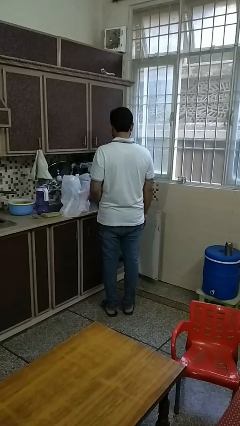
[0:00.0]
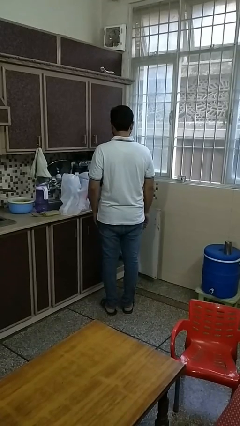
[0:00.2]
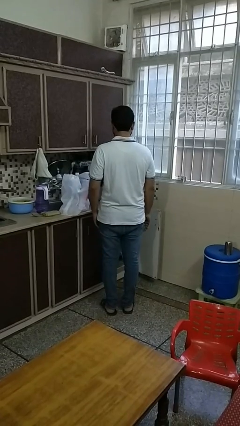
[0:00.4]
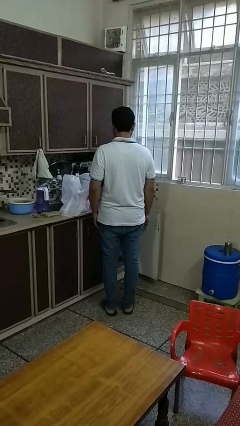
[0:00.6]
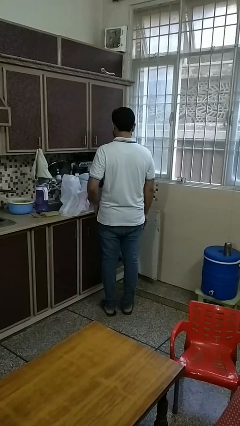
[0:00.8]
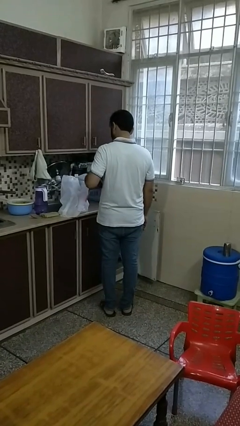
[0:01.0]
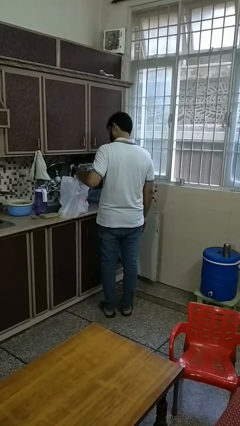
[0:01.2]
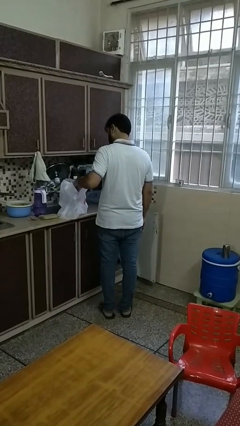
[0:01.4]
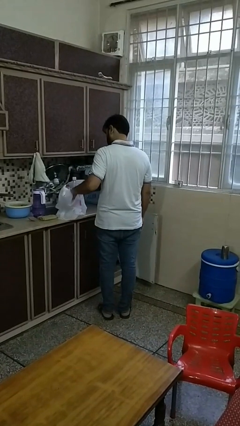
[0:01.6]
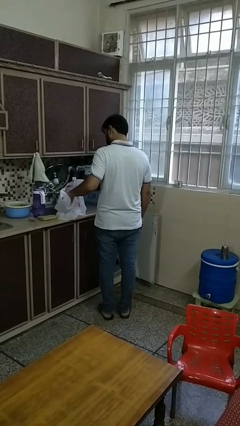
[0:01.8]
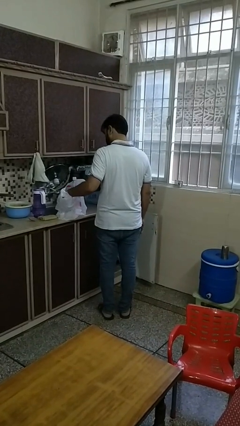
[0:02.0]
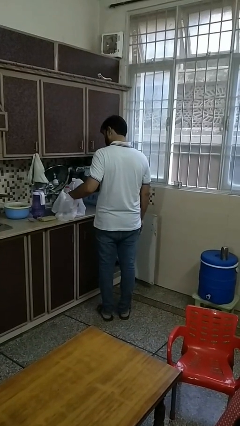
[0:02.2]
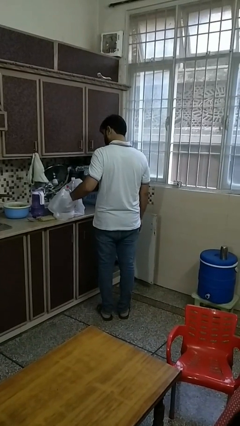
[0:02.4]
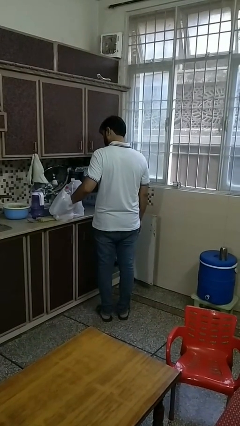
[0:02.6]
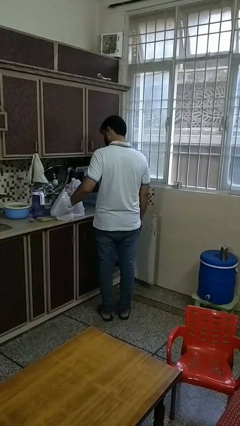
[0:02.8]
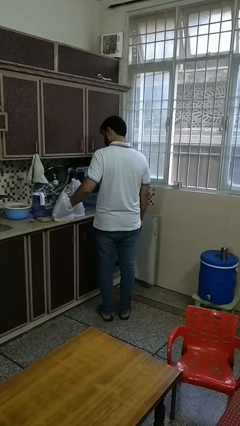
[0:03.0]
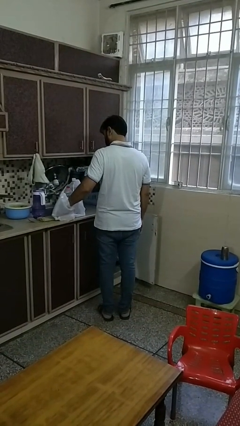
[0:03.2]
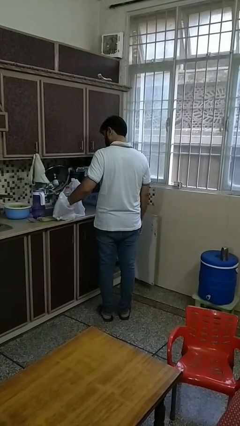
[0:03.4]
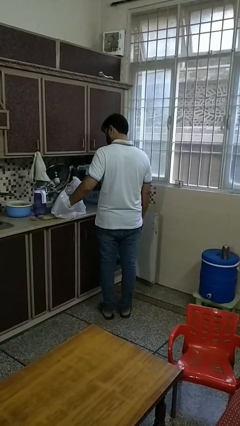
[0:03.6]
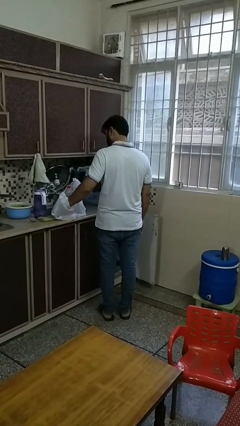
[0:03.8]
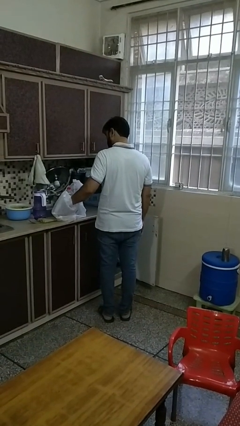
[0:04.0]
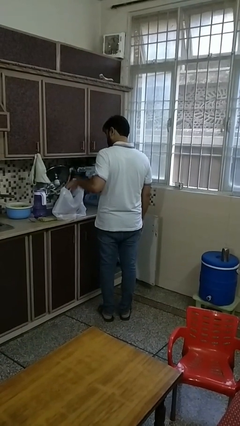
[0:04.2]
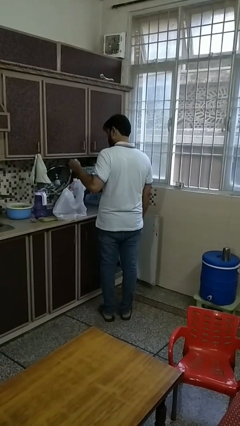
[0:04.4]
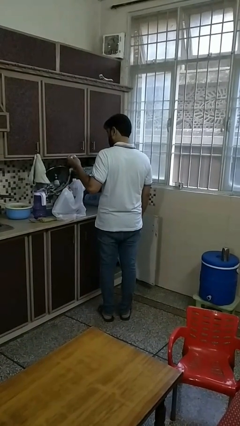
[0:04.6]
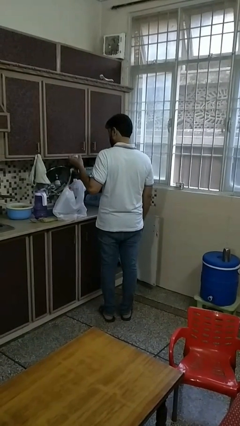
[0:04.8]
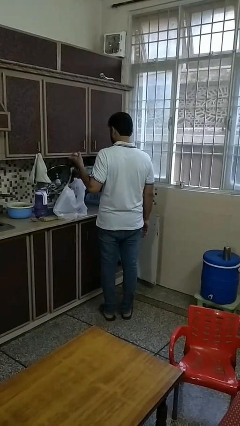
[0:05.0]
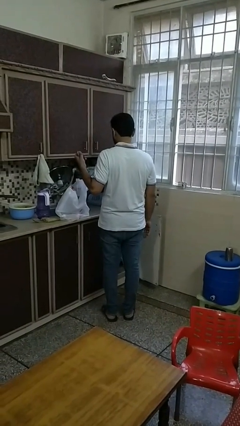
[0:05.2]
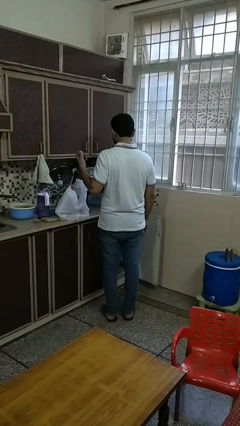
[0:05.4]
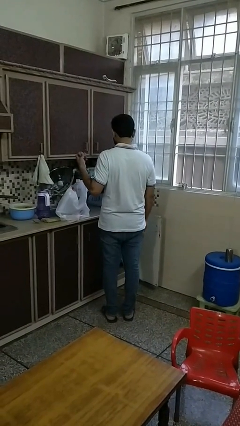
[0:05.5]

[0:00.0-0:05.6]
person takes object from bag

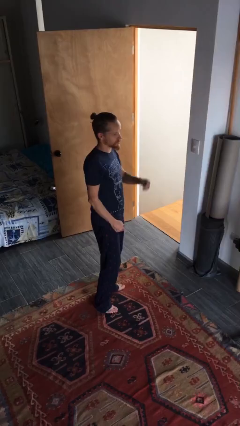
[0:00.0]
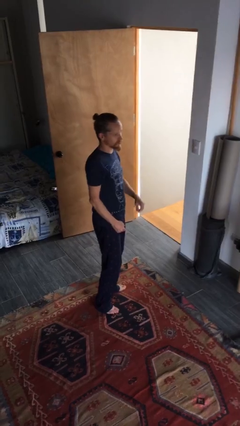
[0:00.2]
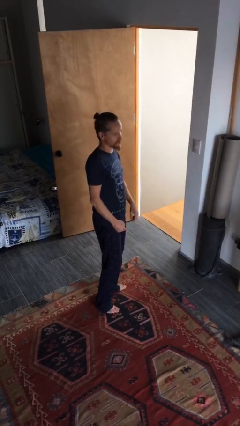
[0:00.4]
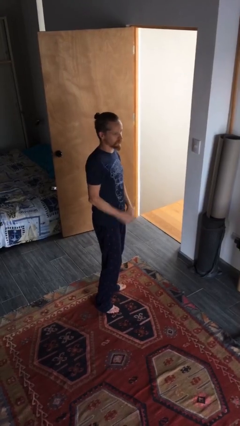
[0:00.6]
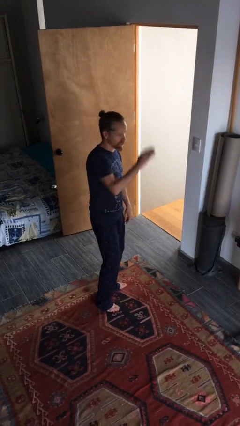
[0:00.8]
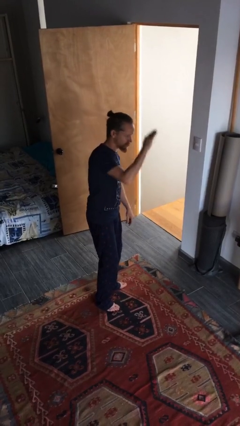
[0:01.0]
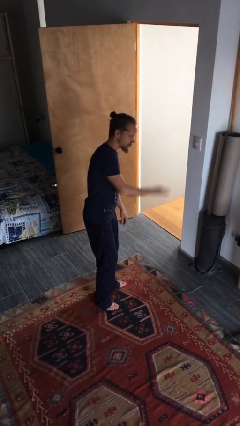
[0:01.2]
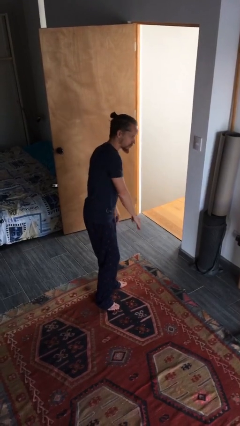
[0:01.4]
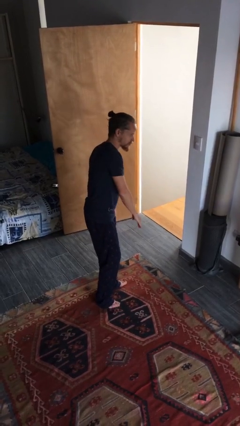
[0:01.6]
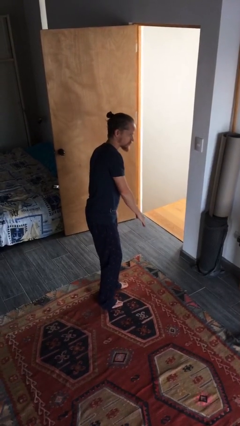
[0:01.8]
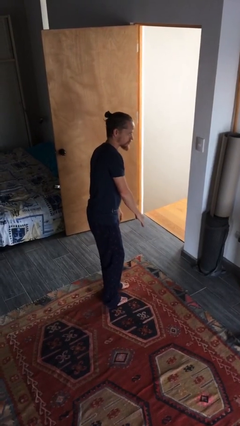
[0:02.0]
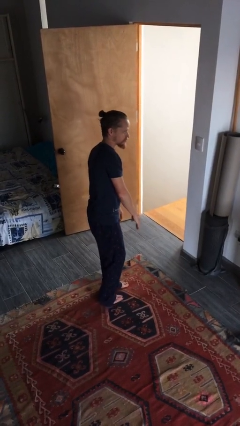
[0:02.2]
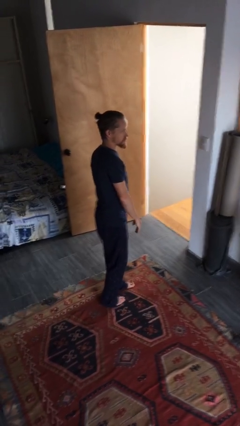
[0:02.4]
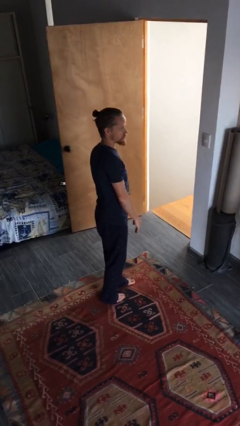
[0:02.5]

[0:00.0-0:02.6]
person gestures swipe down

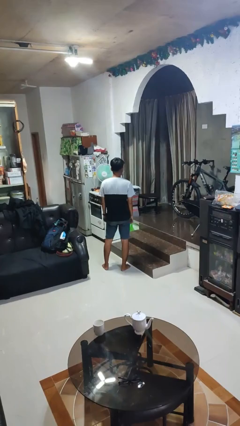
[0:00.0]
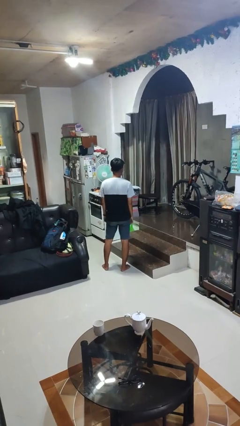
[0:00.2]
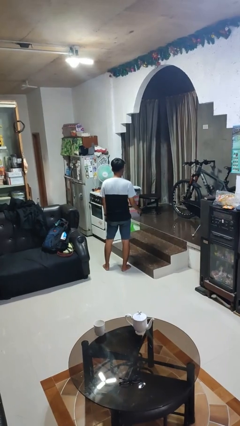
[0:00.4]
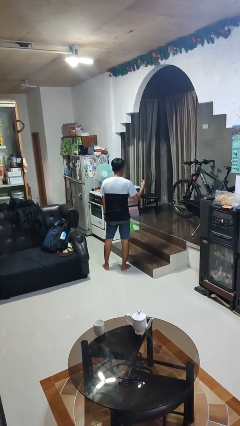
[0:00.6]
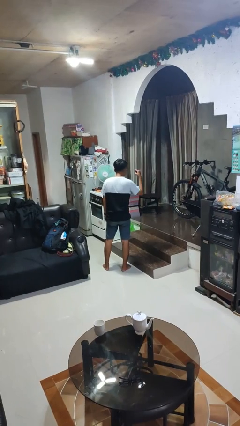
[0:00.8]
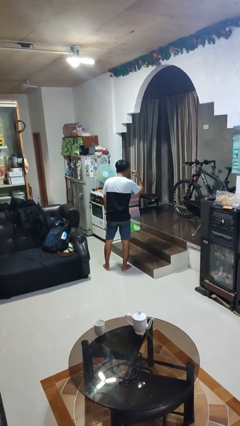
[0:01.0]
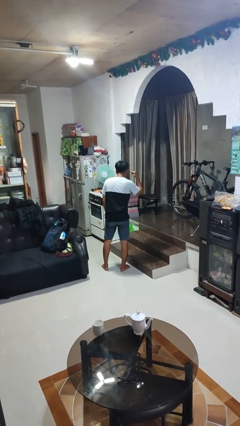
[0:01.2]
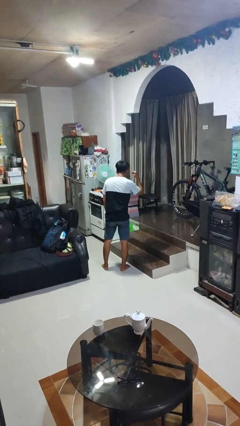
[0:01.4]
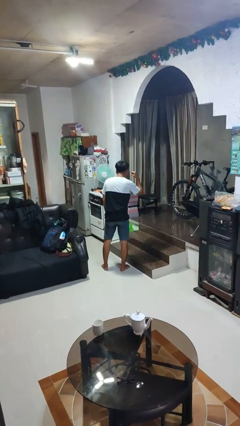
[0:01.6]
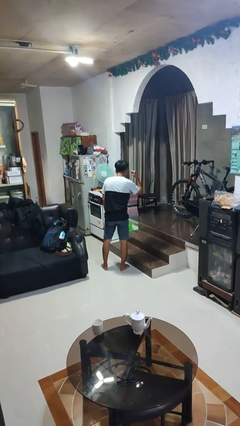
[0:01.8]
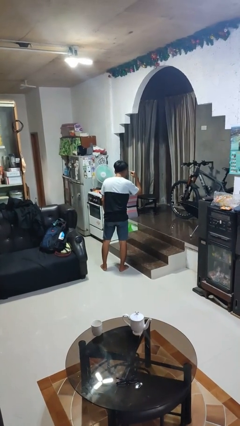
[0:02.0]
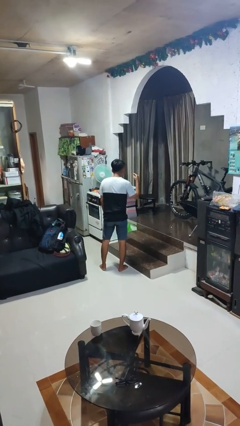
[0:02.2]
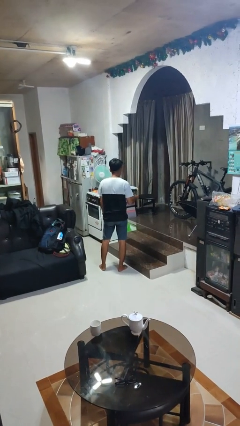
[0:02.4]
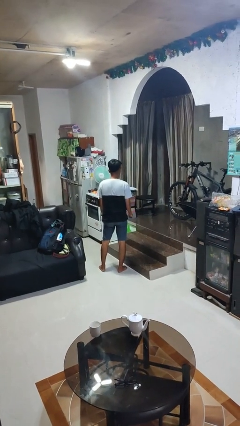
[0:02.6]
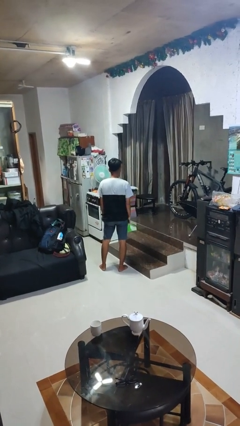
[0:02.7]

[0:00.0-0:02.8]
person gestures listen closely

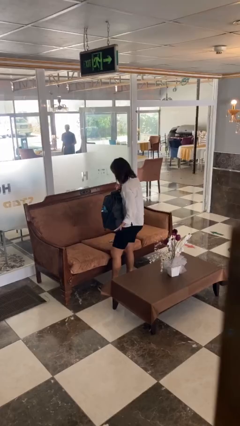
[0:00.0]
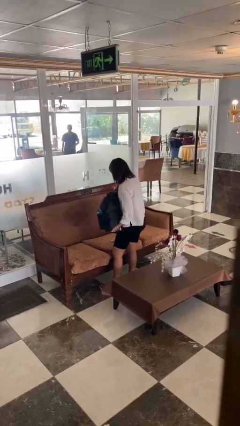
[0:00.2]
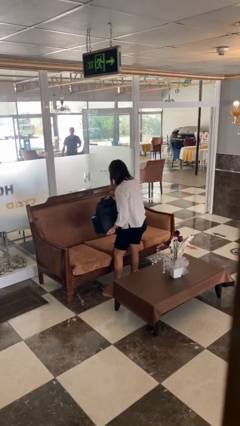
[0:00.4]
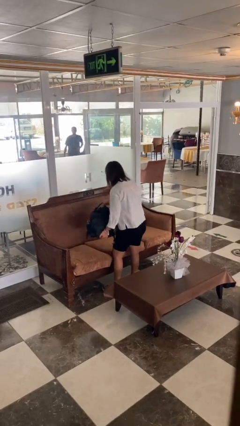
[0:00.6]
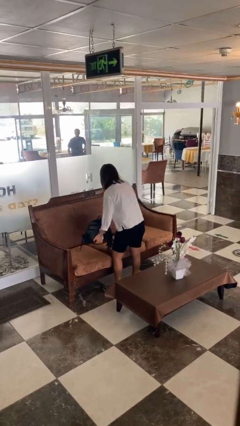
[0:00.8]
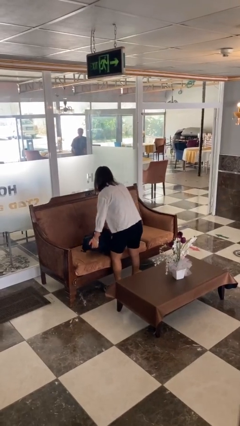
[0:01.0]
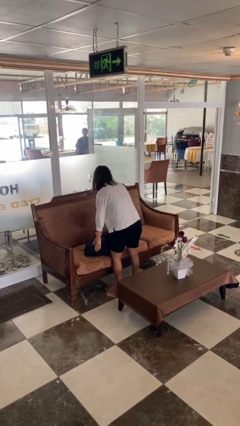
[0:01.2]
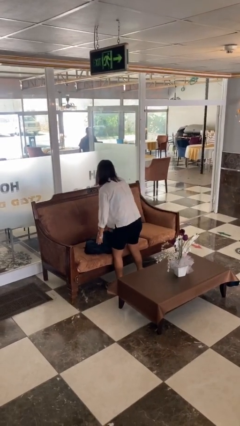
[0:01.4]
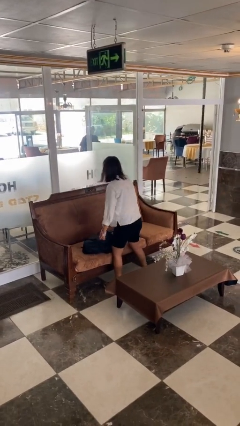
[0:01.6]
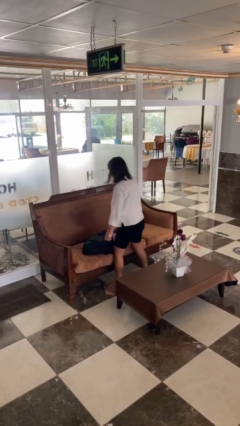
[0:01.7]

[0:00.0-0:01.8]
person puts down object on couch

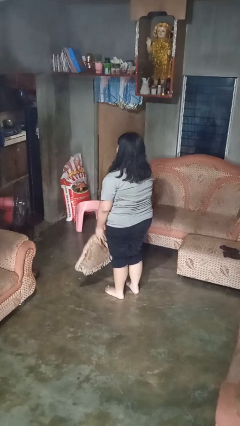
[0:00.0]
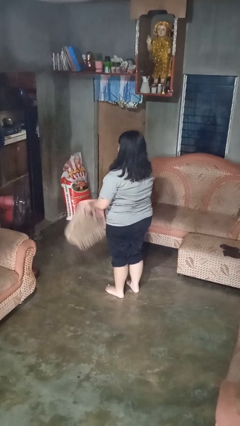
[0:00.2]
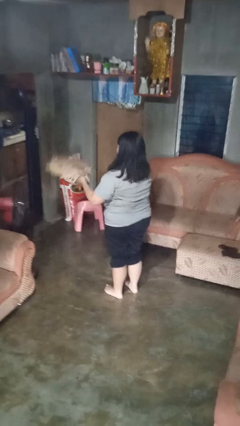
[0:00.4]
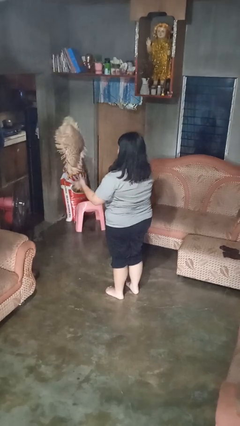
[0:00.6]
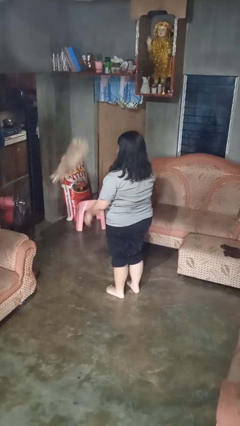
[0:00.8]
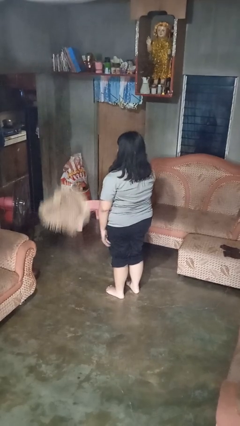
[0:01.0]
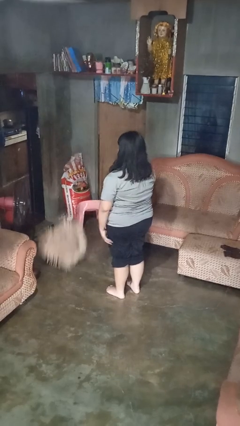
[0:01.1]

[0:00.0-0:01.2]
person throws object into air

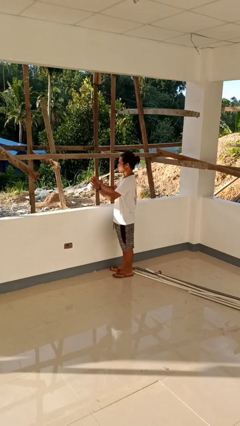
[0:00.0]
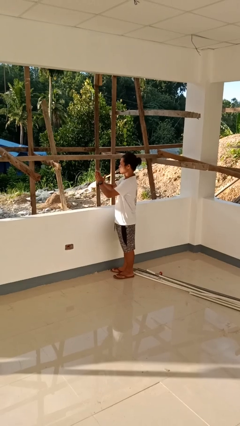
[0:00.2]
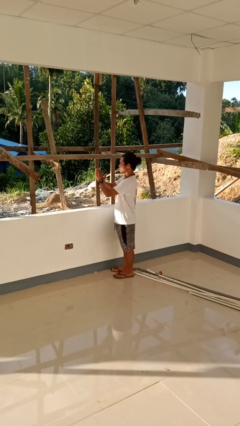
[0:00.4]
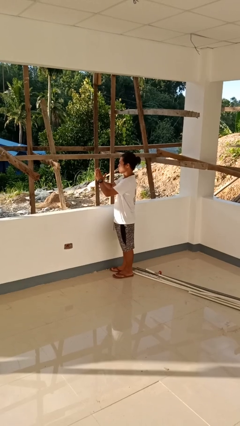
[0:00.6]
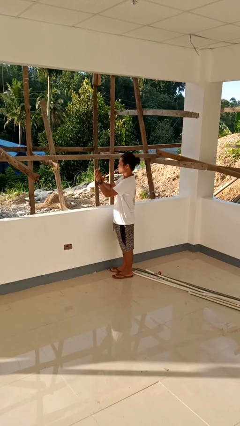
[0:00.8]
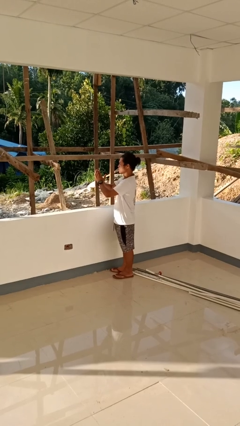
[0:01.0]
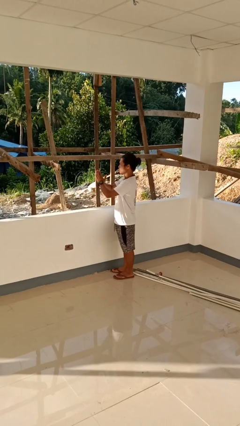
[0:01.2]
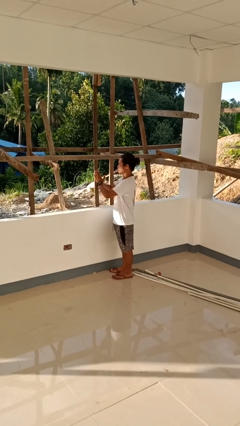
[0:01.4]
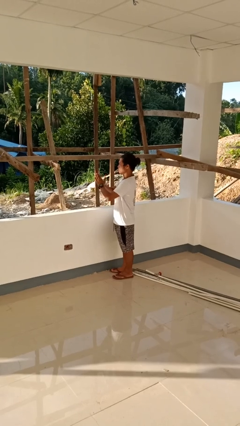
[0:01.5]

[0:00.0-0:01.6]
person prays

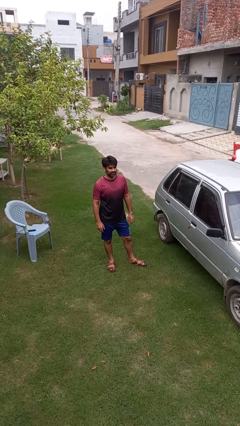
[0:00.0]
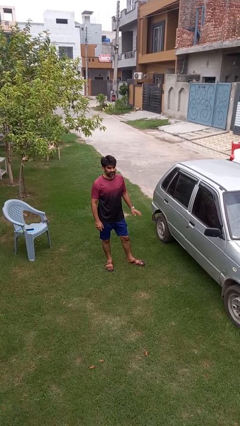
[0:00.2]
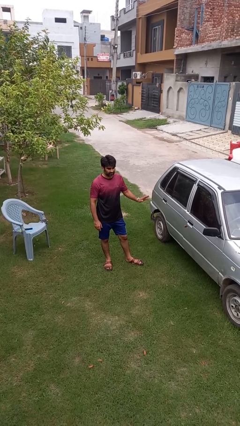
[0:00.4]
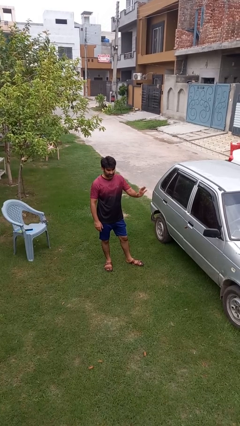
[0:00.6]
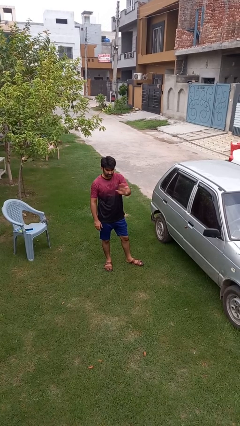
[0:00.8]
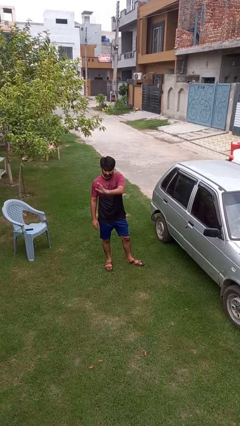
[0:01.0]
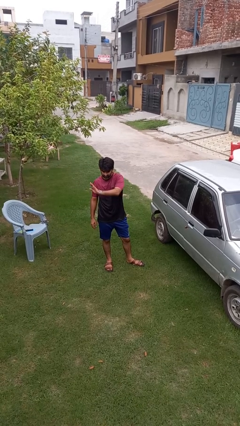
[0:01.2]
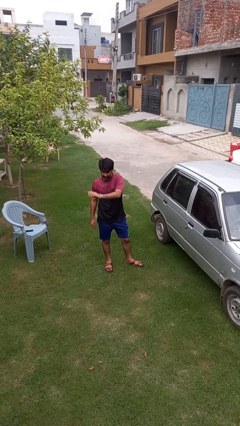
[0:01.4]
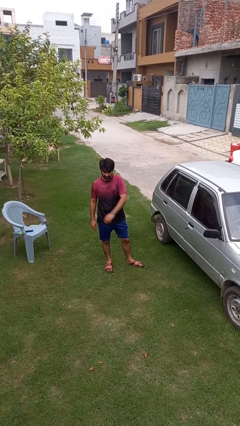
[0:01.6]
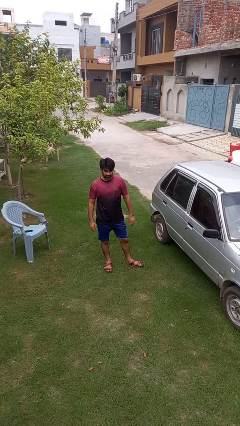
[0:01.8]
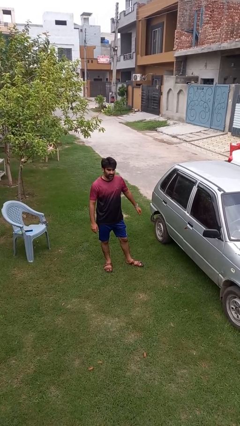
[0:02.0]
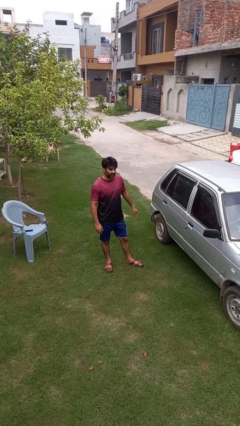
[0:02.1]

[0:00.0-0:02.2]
person gestures swipe right
